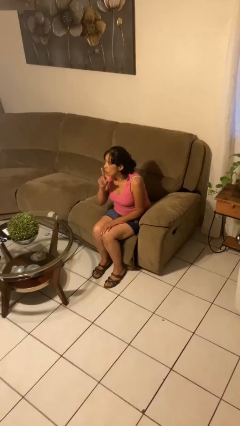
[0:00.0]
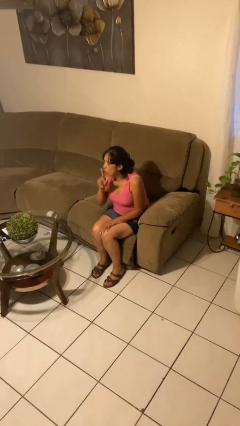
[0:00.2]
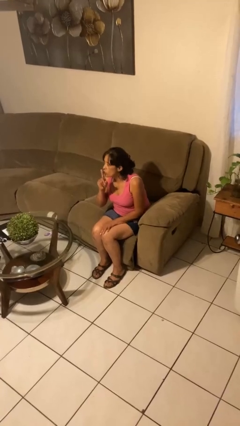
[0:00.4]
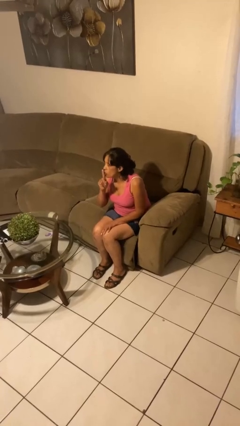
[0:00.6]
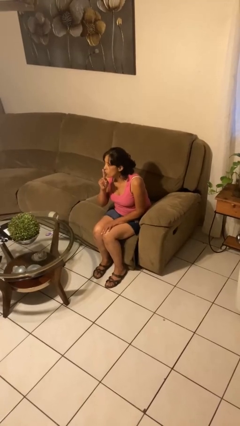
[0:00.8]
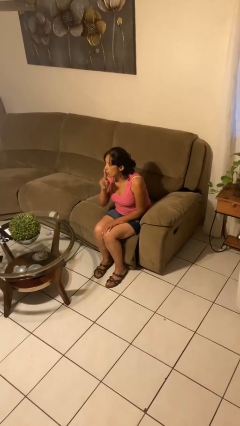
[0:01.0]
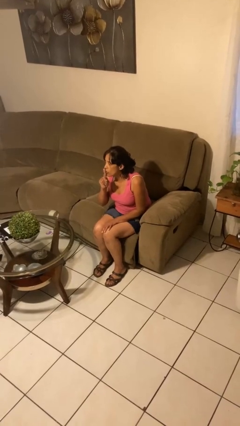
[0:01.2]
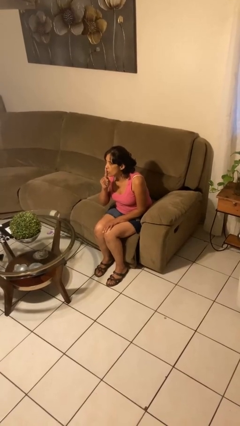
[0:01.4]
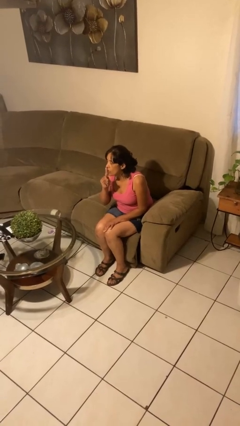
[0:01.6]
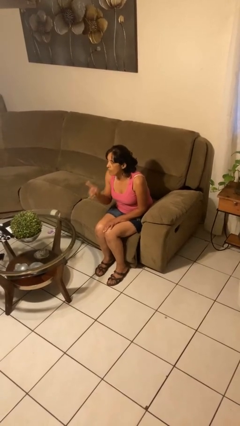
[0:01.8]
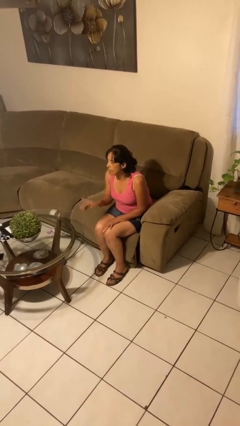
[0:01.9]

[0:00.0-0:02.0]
person gestures be quiet

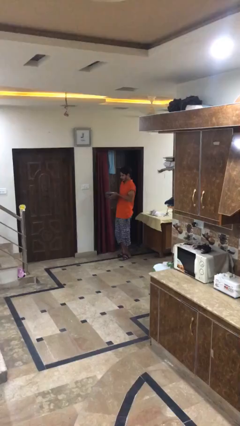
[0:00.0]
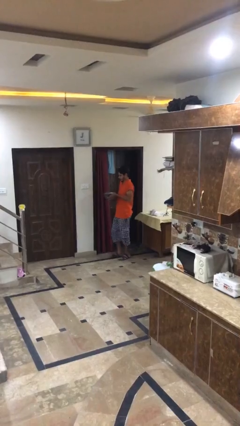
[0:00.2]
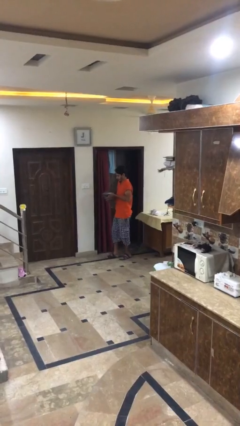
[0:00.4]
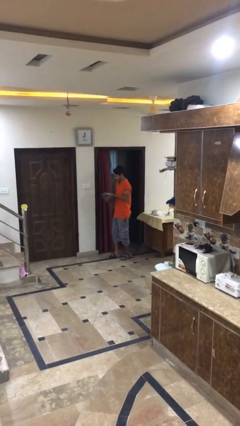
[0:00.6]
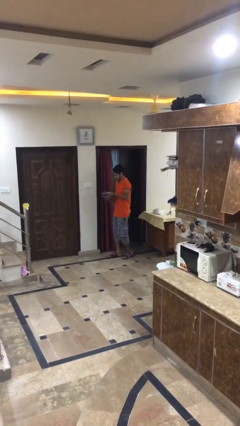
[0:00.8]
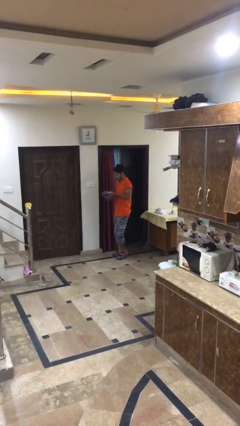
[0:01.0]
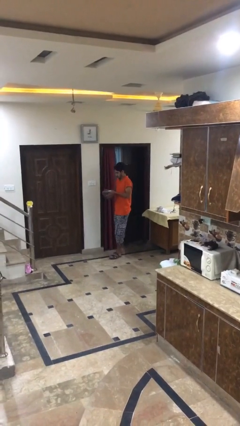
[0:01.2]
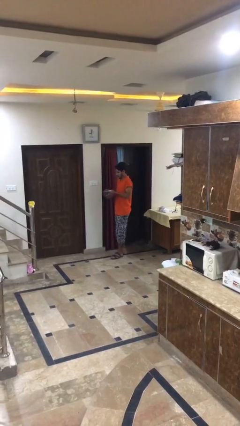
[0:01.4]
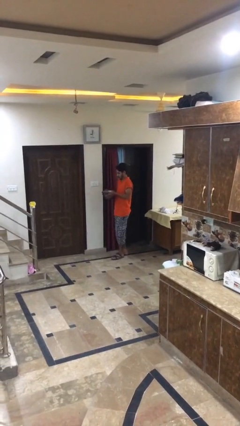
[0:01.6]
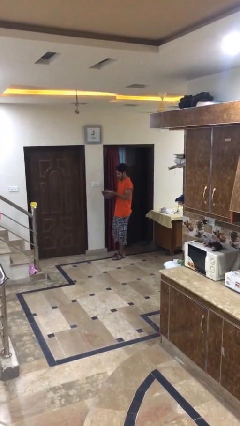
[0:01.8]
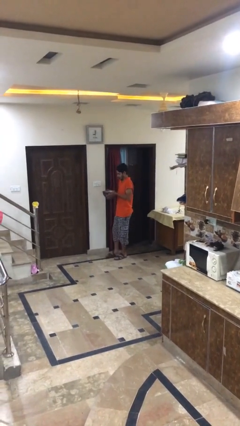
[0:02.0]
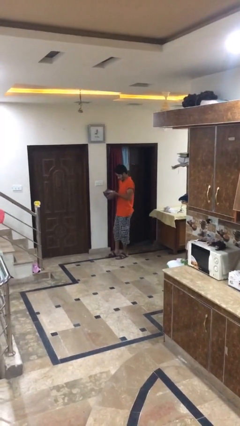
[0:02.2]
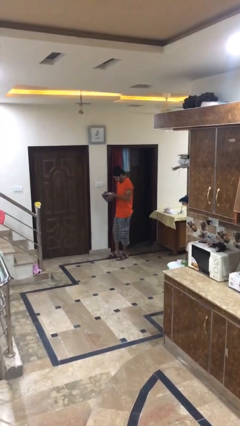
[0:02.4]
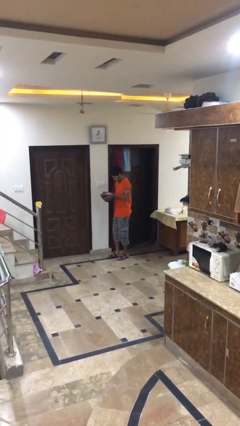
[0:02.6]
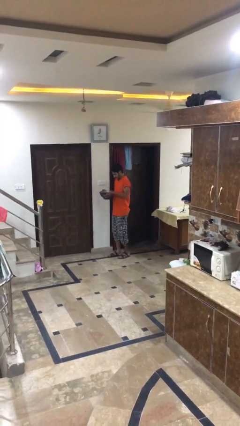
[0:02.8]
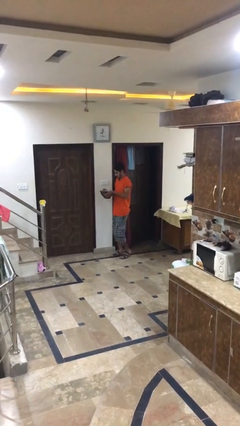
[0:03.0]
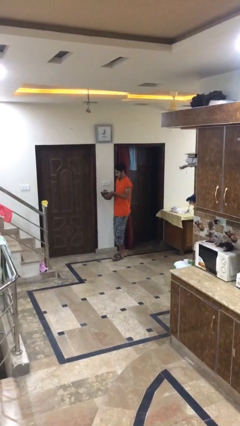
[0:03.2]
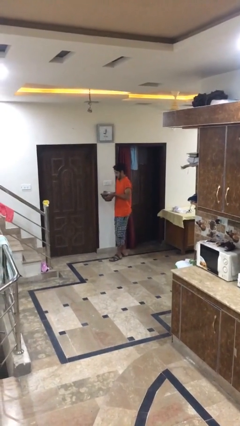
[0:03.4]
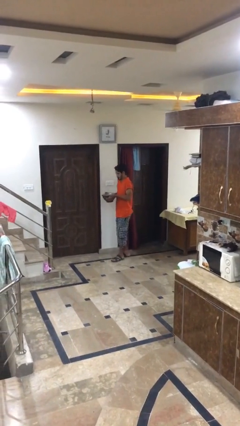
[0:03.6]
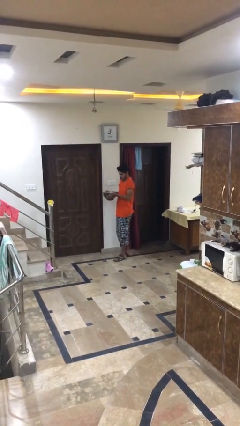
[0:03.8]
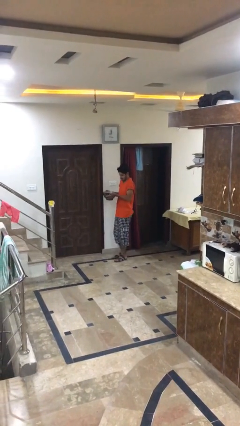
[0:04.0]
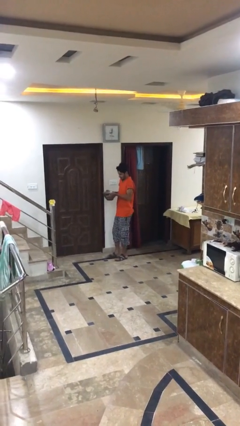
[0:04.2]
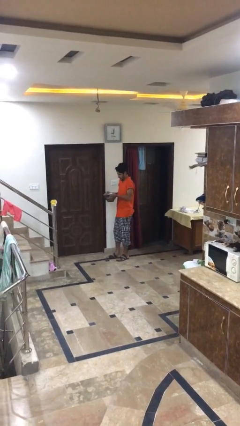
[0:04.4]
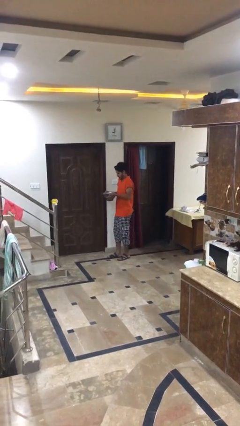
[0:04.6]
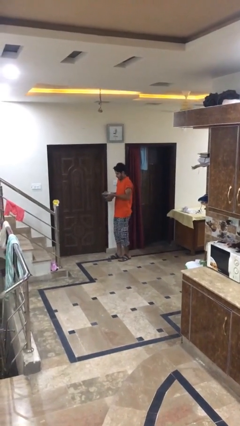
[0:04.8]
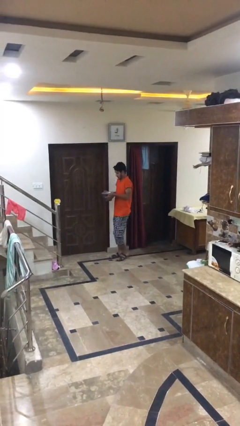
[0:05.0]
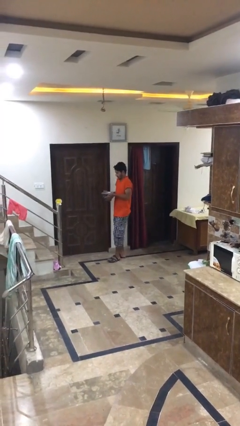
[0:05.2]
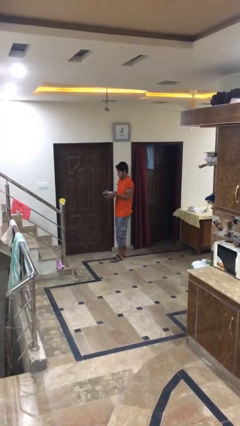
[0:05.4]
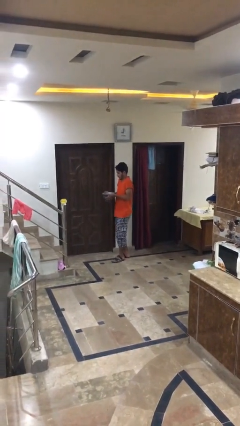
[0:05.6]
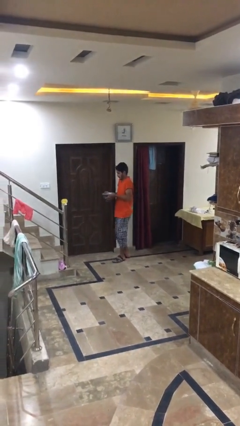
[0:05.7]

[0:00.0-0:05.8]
person carries heavy object

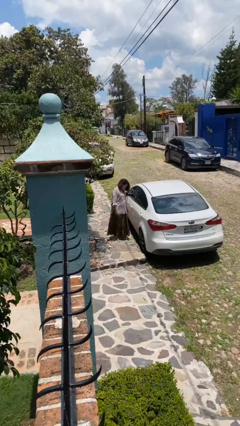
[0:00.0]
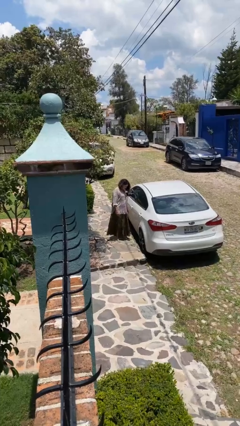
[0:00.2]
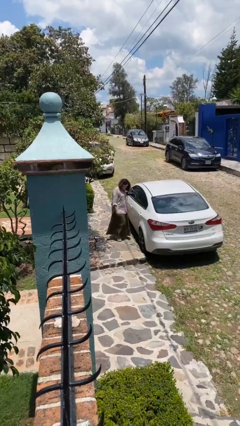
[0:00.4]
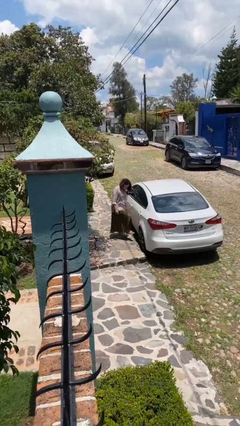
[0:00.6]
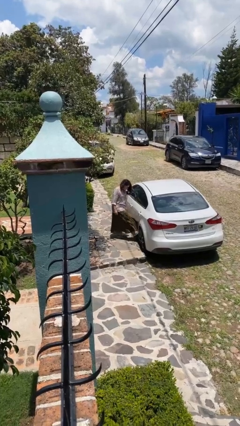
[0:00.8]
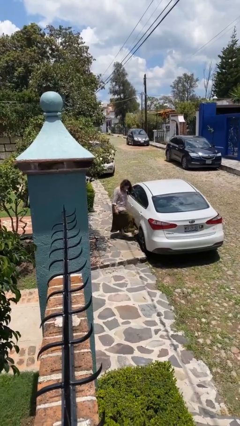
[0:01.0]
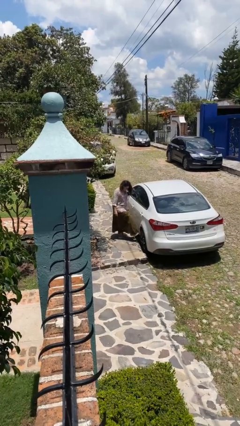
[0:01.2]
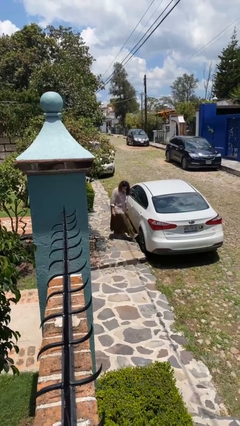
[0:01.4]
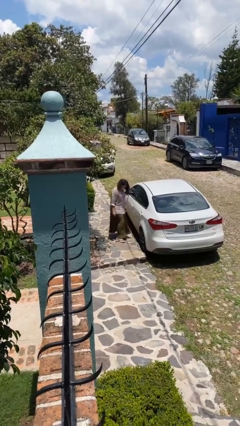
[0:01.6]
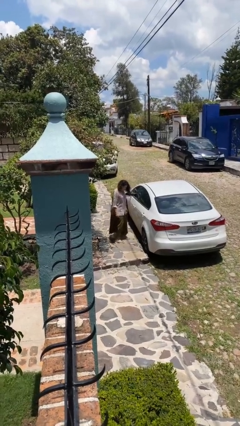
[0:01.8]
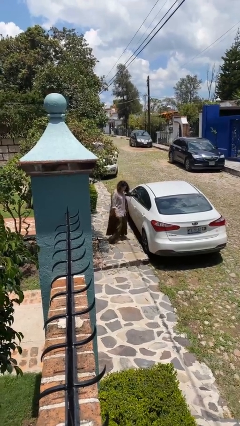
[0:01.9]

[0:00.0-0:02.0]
person kicks car tires

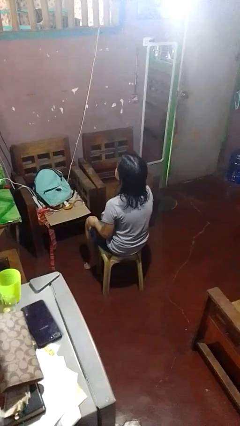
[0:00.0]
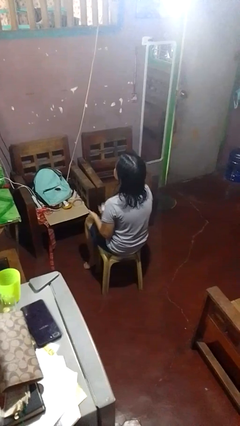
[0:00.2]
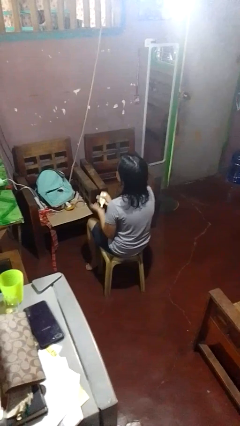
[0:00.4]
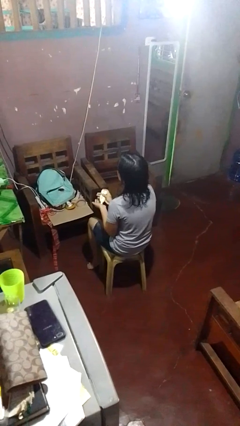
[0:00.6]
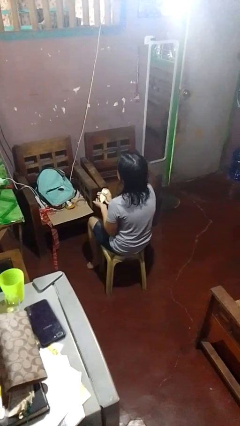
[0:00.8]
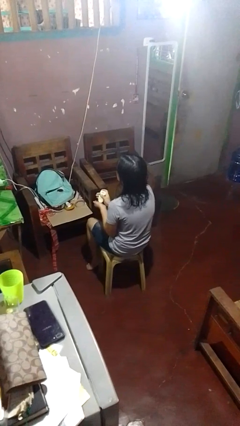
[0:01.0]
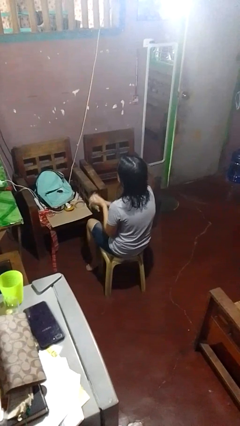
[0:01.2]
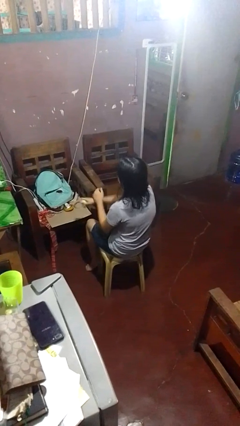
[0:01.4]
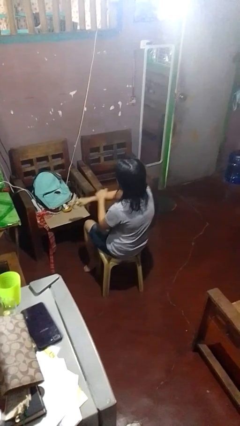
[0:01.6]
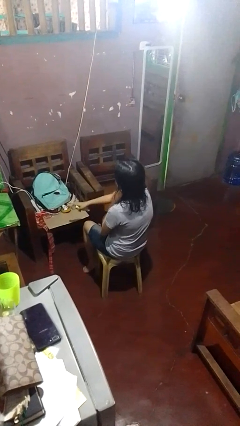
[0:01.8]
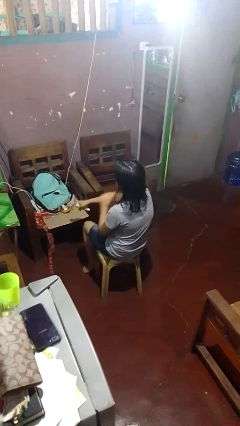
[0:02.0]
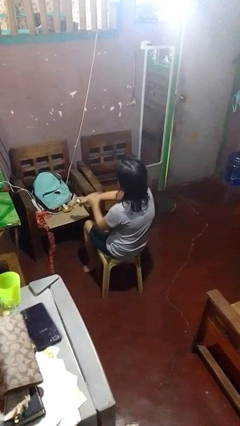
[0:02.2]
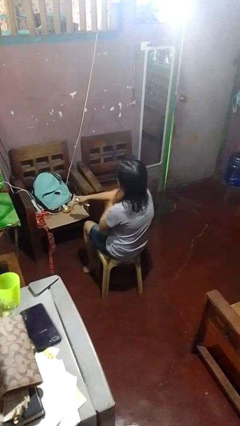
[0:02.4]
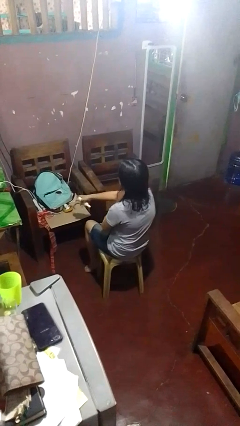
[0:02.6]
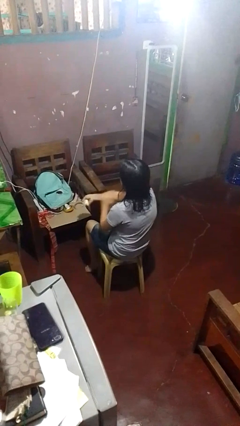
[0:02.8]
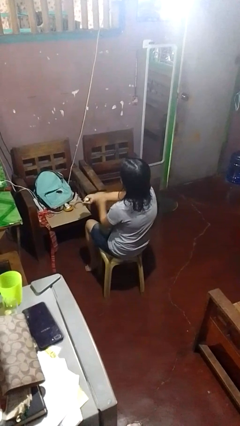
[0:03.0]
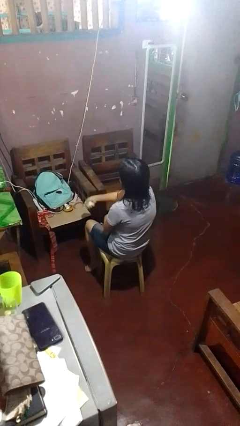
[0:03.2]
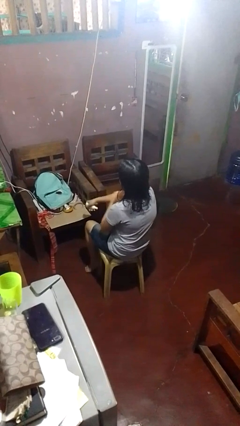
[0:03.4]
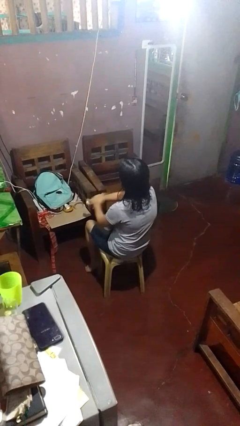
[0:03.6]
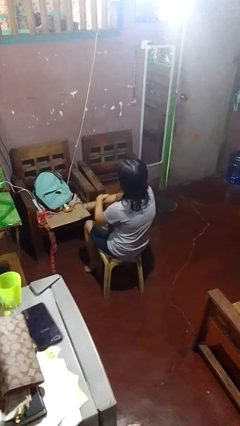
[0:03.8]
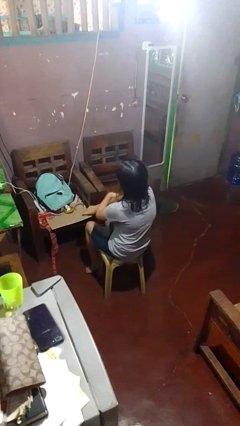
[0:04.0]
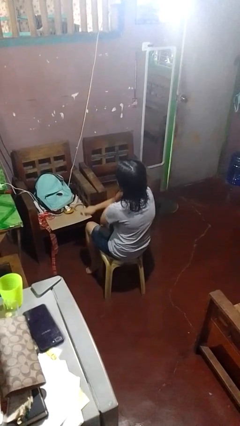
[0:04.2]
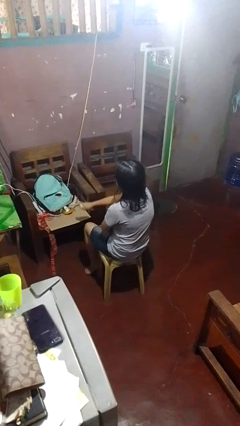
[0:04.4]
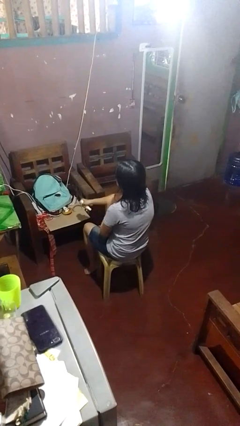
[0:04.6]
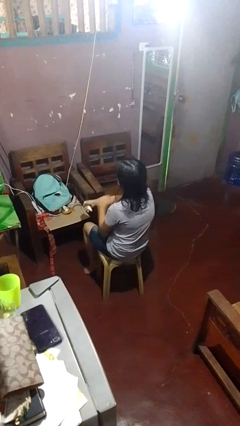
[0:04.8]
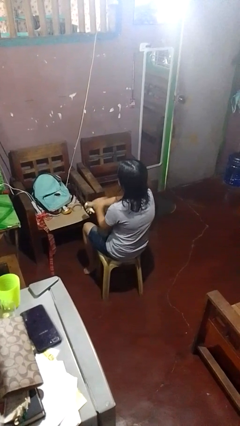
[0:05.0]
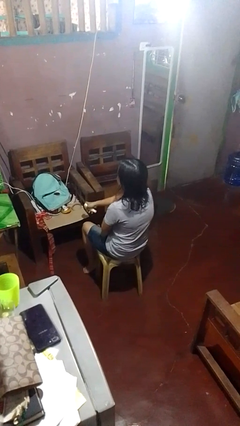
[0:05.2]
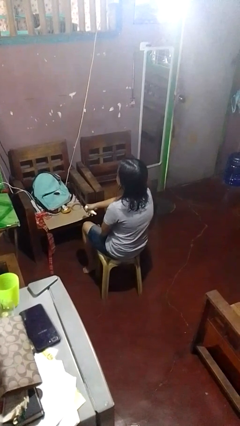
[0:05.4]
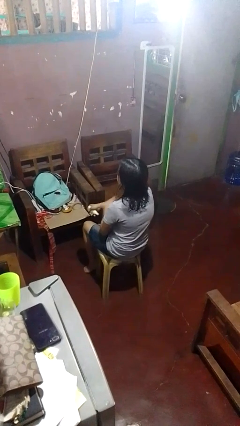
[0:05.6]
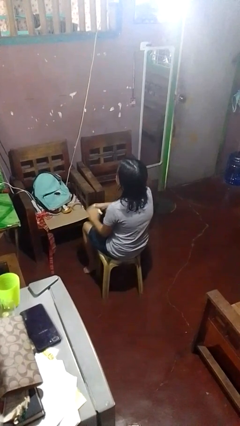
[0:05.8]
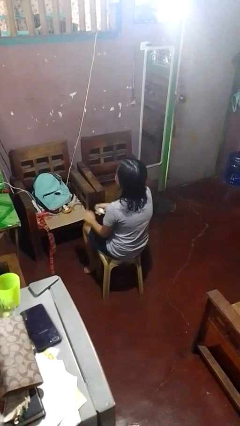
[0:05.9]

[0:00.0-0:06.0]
person applies sunscreen

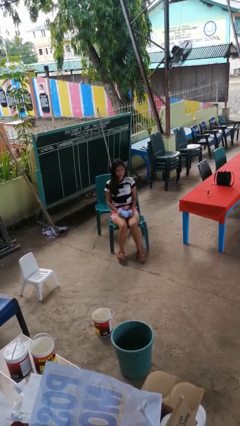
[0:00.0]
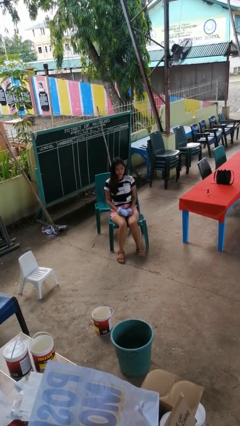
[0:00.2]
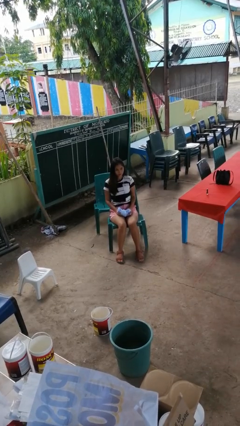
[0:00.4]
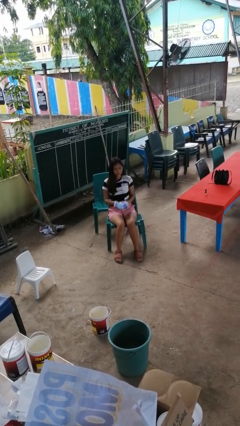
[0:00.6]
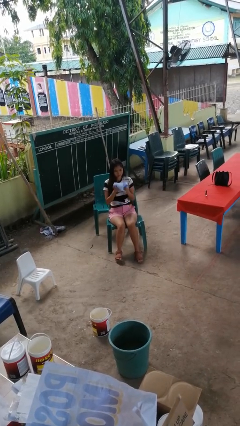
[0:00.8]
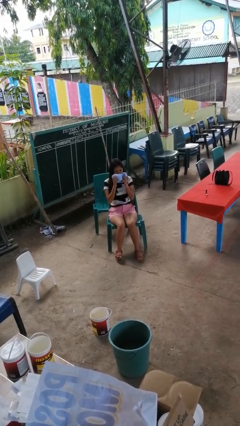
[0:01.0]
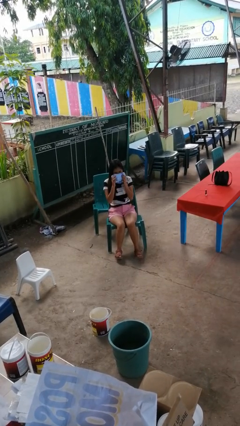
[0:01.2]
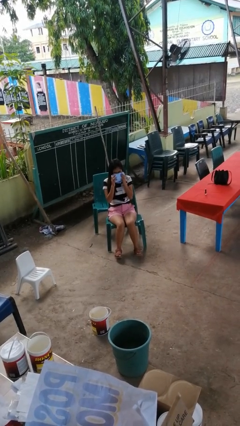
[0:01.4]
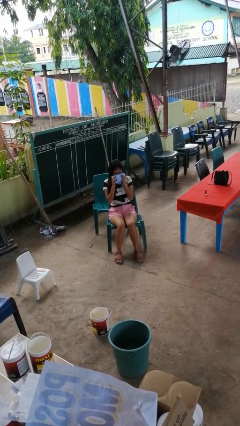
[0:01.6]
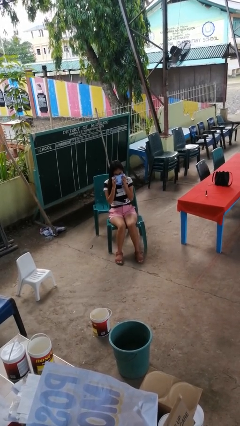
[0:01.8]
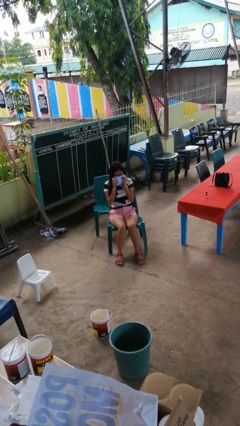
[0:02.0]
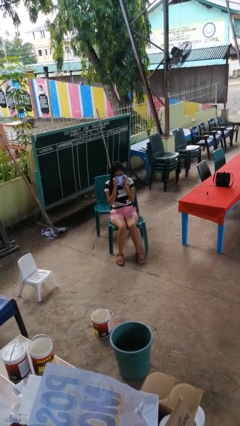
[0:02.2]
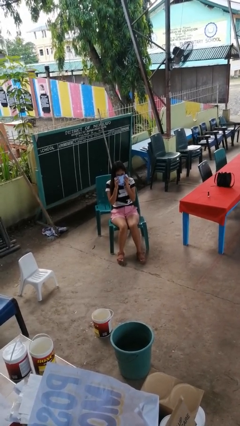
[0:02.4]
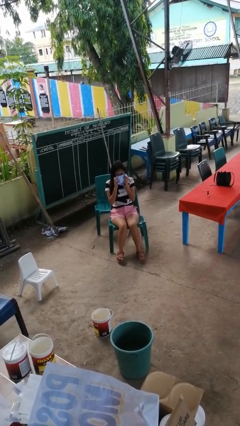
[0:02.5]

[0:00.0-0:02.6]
person blows nose
